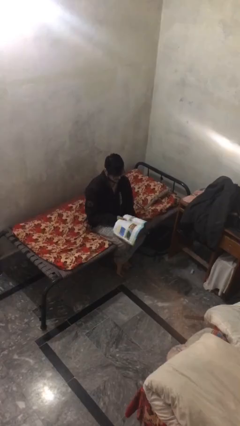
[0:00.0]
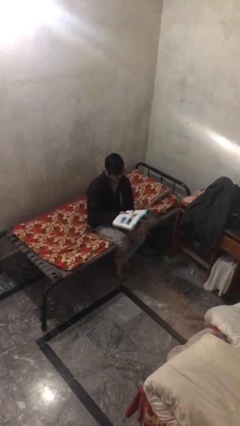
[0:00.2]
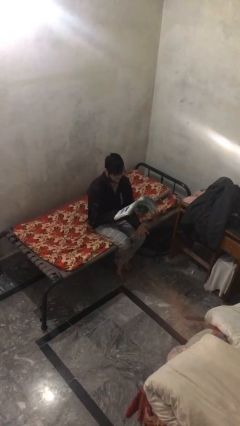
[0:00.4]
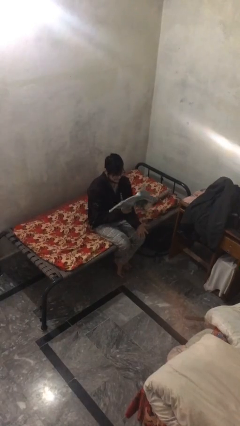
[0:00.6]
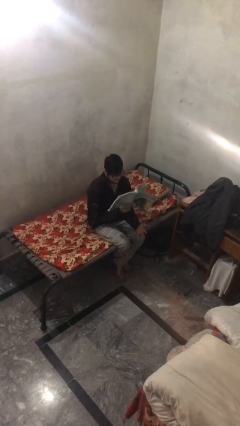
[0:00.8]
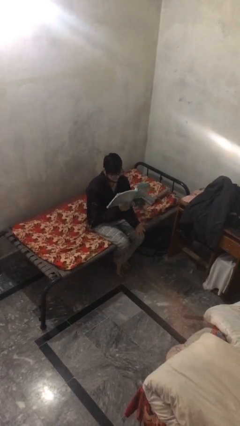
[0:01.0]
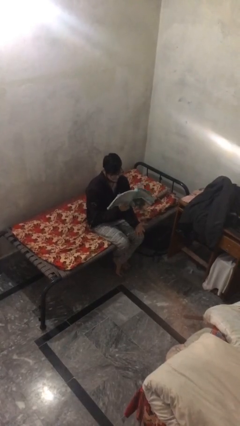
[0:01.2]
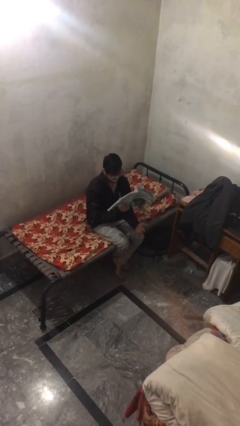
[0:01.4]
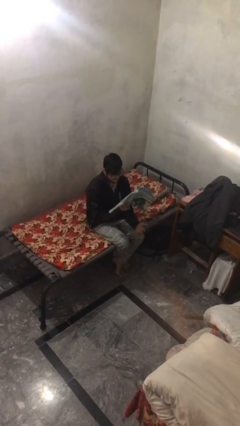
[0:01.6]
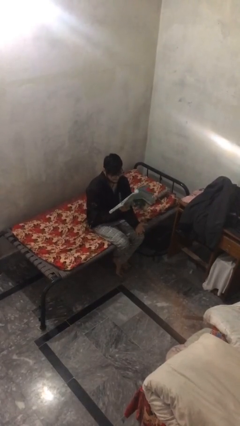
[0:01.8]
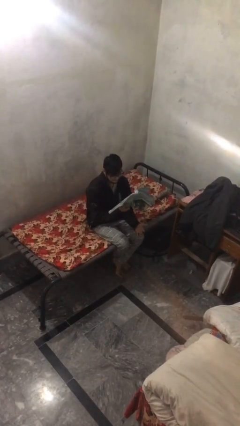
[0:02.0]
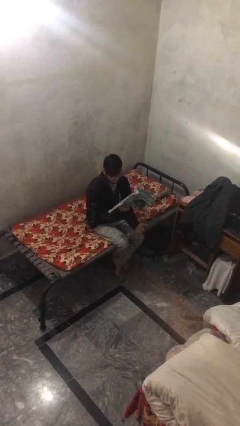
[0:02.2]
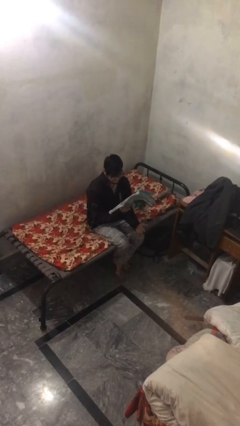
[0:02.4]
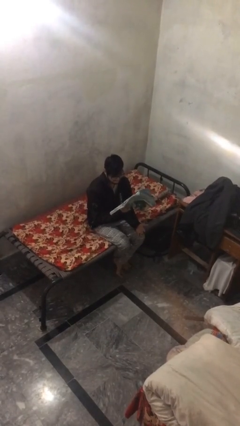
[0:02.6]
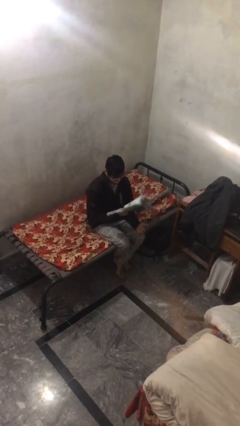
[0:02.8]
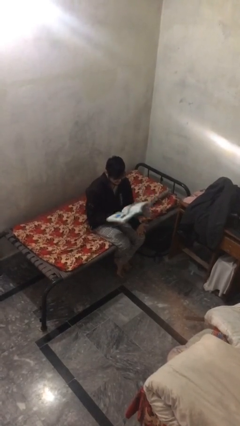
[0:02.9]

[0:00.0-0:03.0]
person reads document

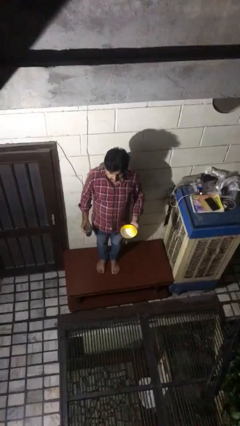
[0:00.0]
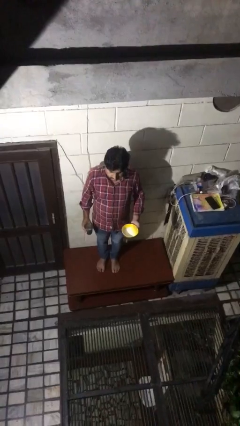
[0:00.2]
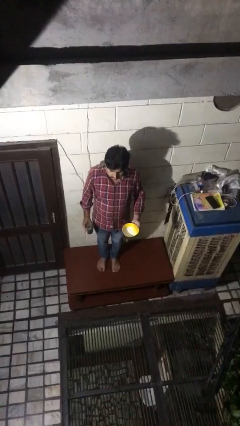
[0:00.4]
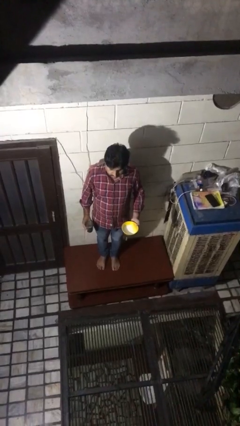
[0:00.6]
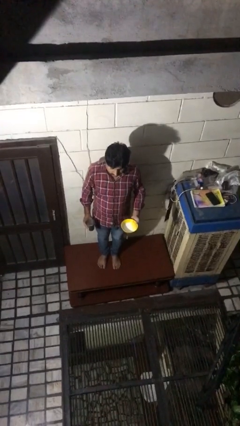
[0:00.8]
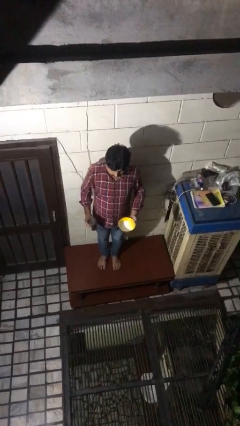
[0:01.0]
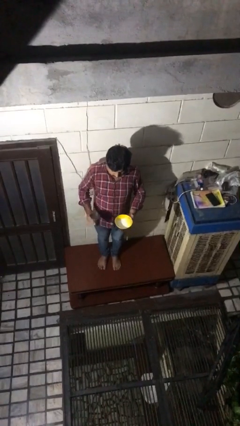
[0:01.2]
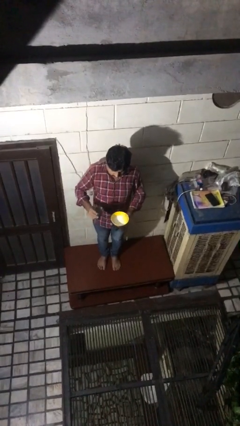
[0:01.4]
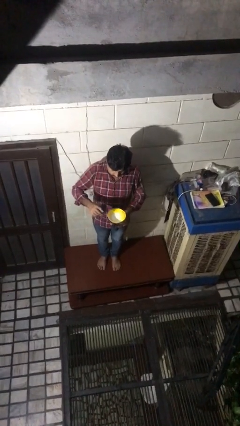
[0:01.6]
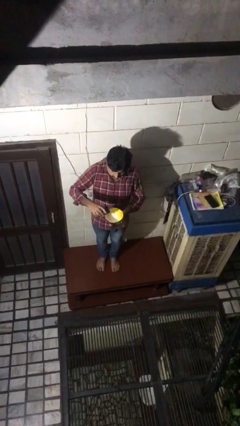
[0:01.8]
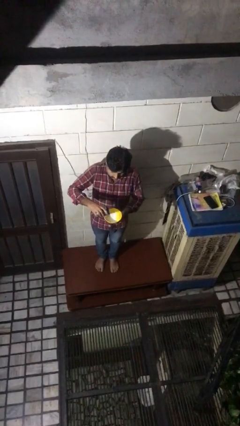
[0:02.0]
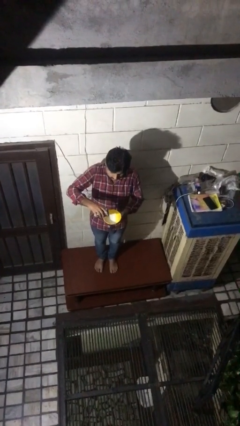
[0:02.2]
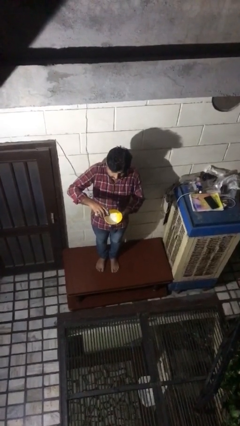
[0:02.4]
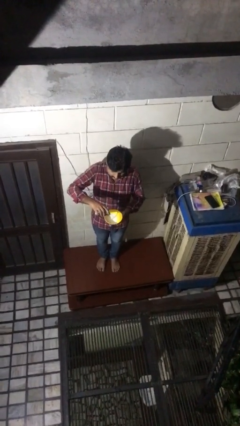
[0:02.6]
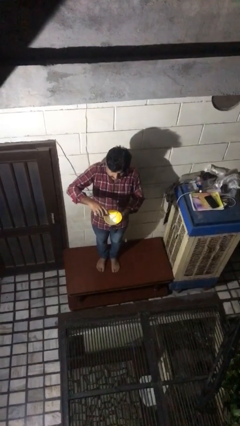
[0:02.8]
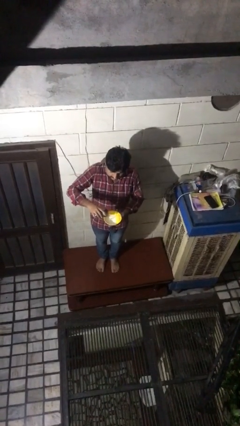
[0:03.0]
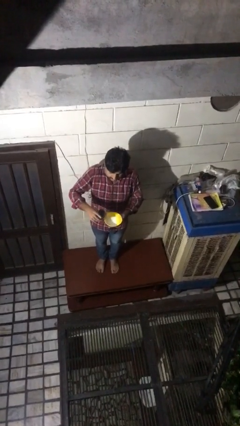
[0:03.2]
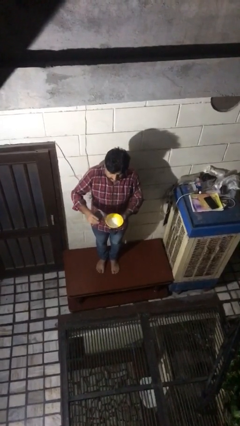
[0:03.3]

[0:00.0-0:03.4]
person pours into bowl

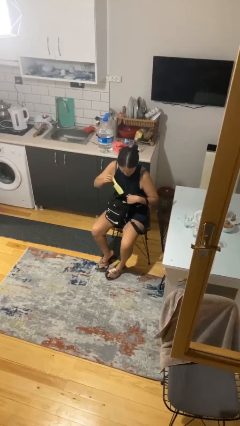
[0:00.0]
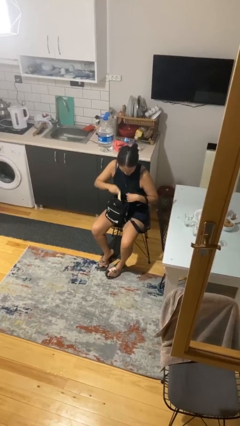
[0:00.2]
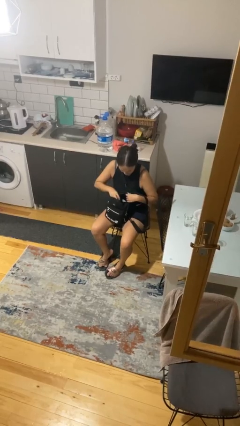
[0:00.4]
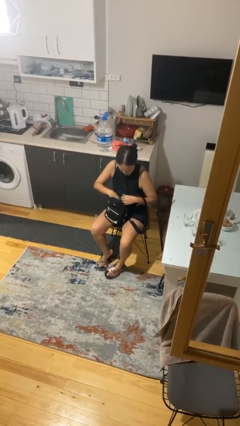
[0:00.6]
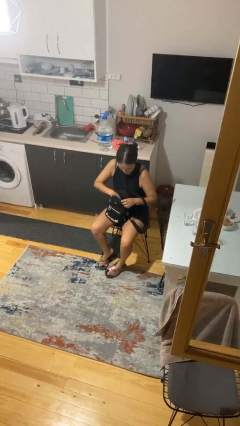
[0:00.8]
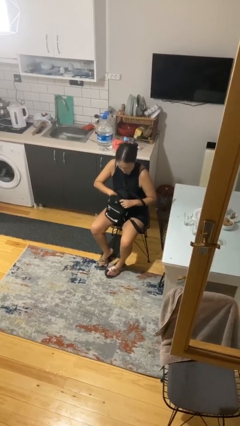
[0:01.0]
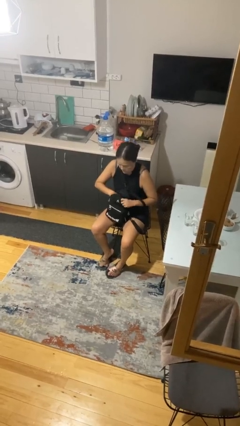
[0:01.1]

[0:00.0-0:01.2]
person puts object into backpack

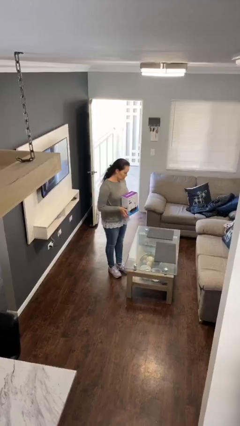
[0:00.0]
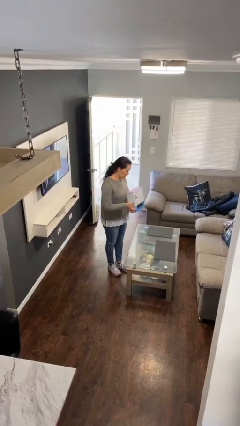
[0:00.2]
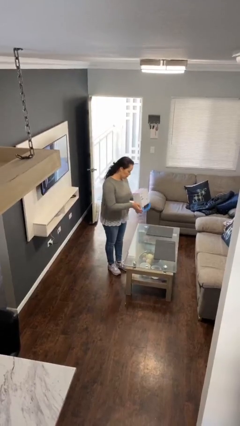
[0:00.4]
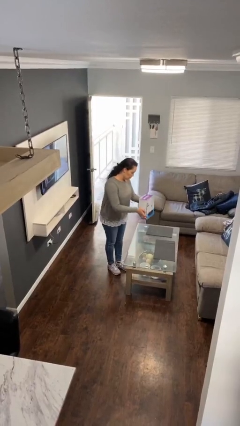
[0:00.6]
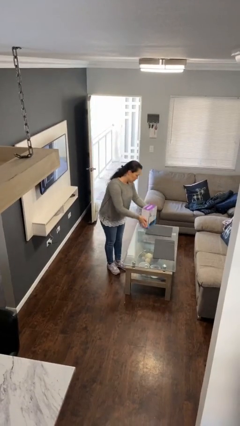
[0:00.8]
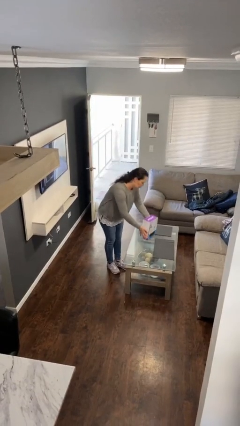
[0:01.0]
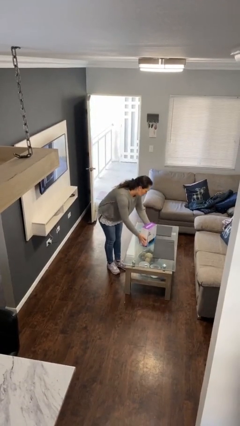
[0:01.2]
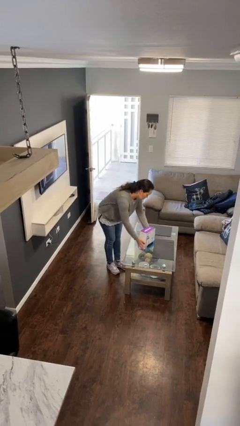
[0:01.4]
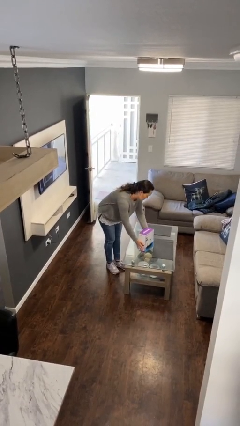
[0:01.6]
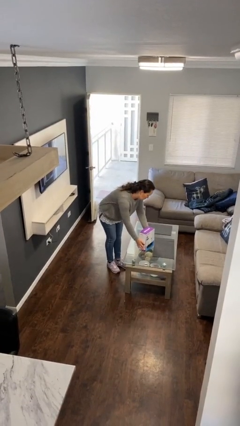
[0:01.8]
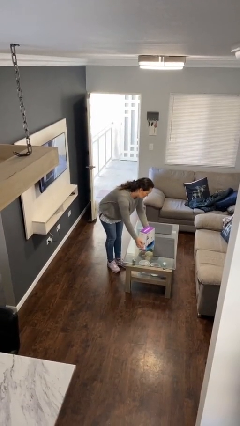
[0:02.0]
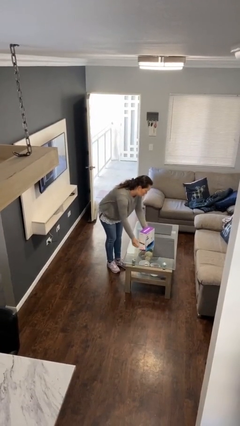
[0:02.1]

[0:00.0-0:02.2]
person puts down object on table

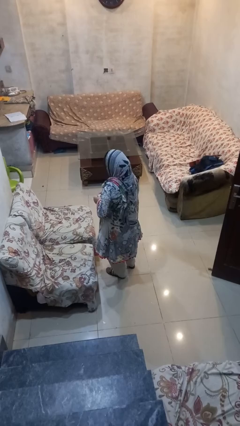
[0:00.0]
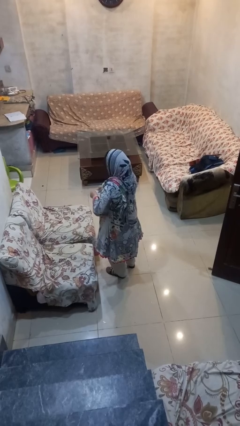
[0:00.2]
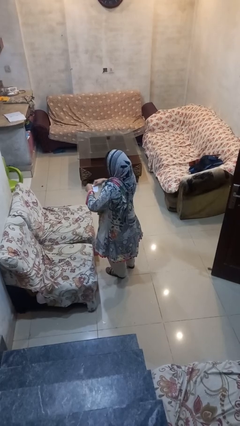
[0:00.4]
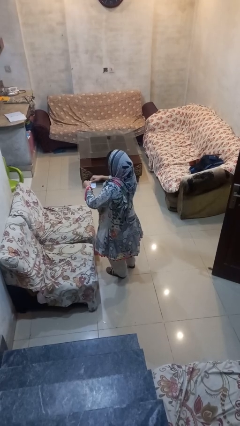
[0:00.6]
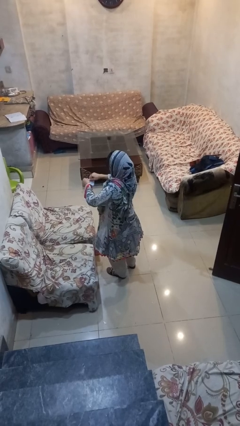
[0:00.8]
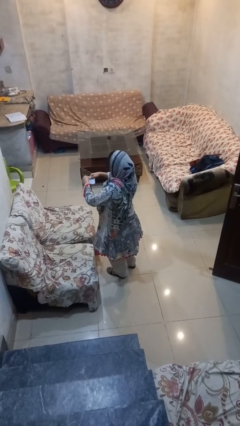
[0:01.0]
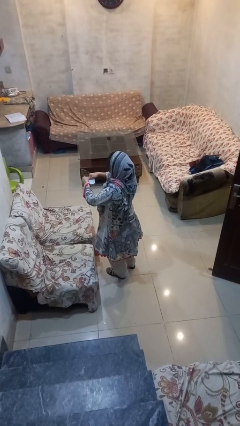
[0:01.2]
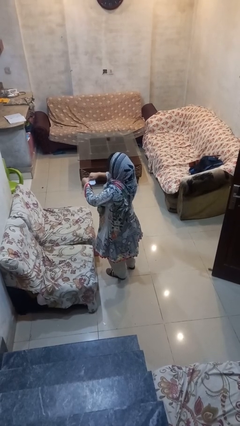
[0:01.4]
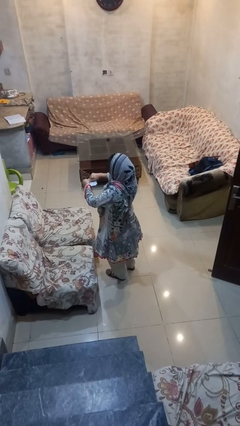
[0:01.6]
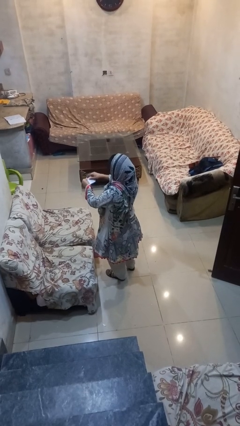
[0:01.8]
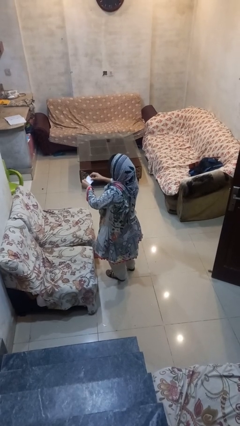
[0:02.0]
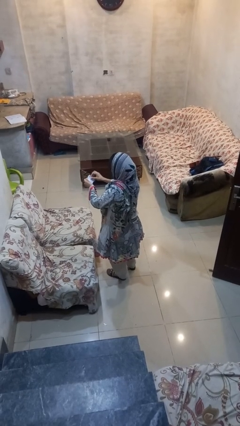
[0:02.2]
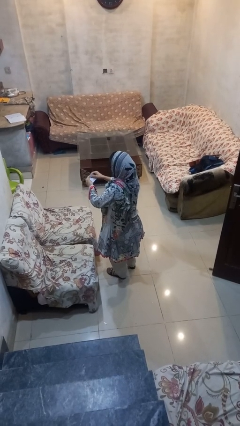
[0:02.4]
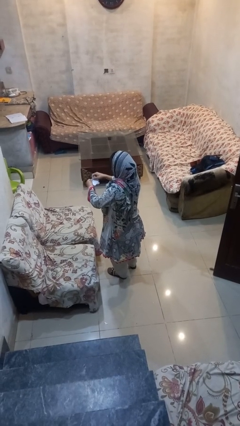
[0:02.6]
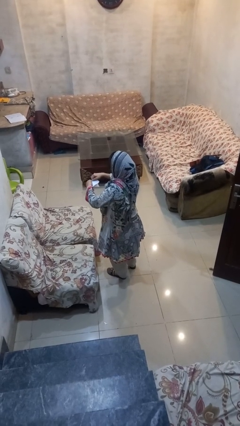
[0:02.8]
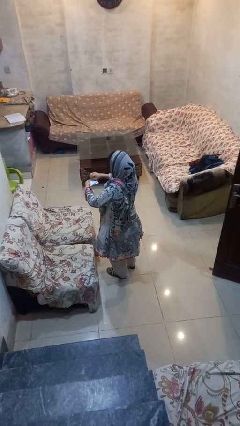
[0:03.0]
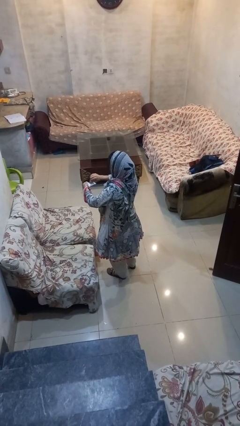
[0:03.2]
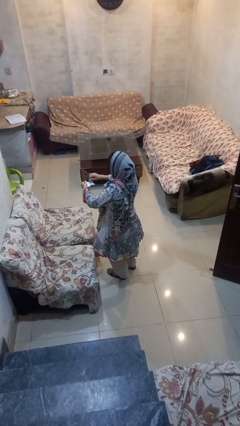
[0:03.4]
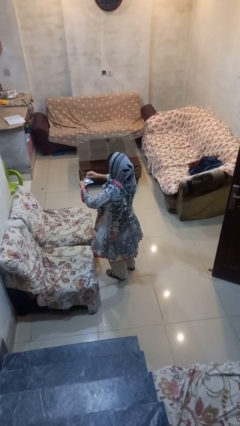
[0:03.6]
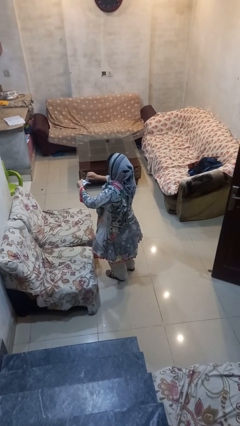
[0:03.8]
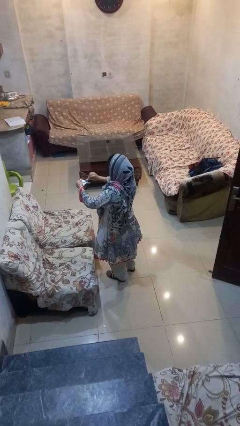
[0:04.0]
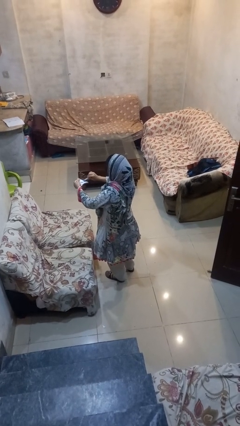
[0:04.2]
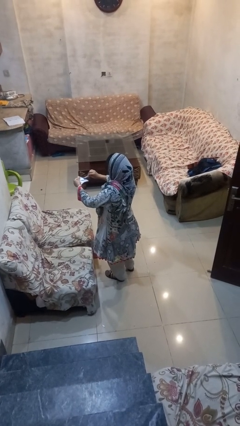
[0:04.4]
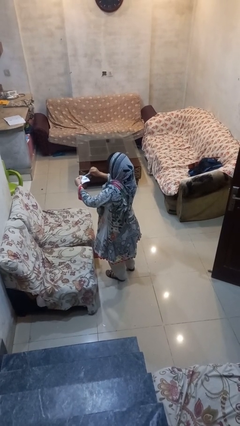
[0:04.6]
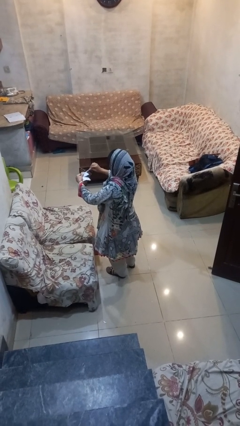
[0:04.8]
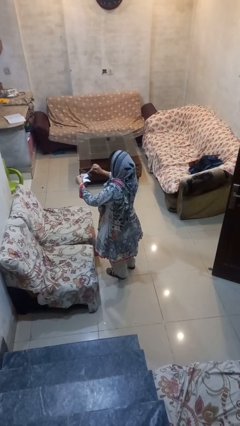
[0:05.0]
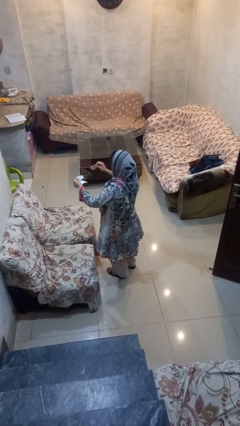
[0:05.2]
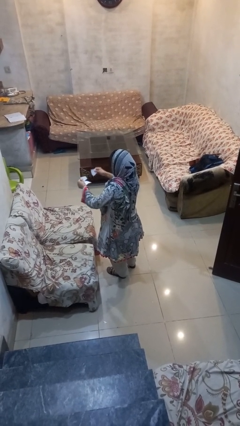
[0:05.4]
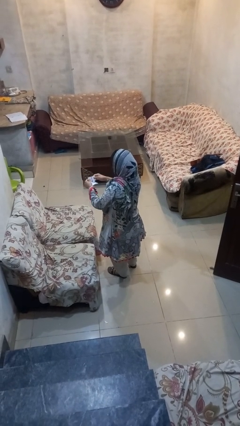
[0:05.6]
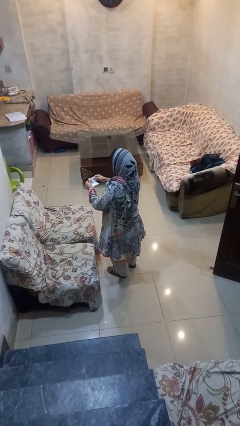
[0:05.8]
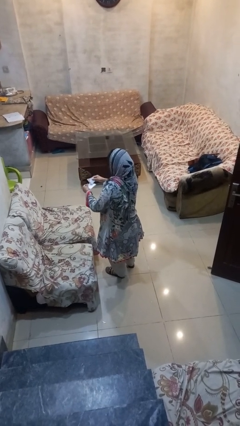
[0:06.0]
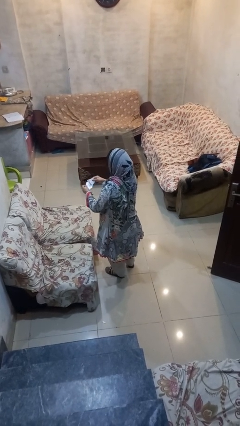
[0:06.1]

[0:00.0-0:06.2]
person tears paper

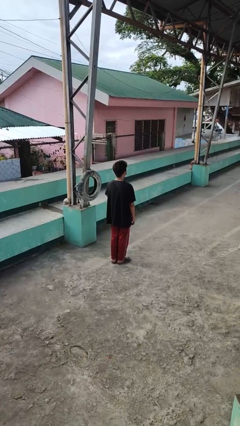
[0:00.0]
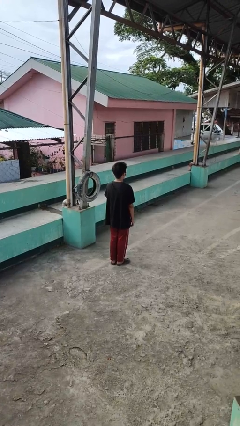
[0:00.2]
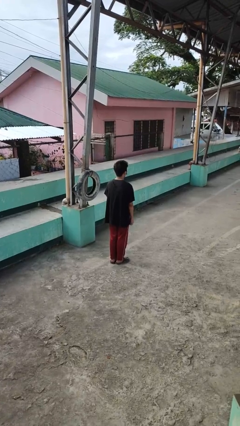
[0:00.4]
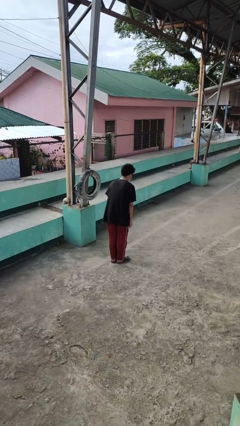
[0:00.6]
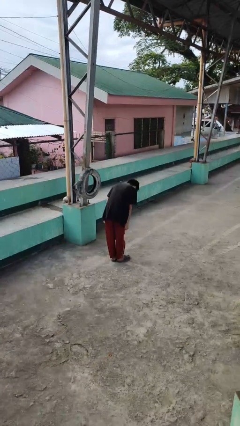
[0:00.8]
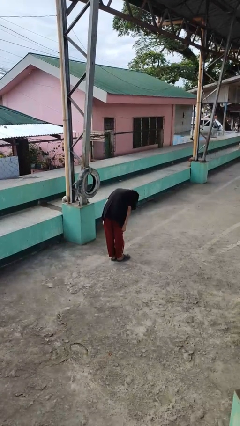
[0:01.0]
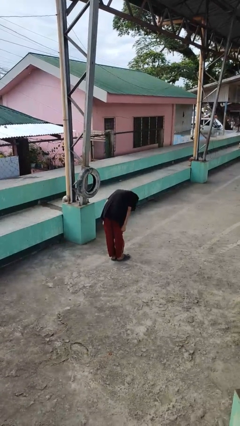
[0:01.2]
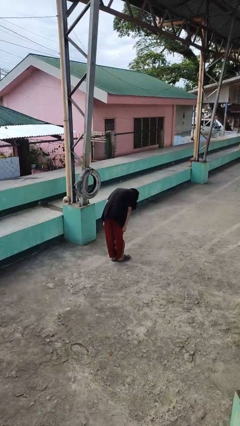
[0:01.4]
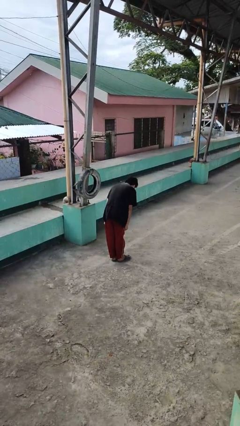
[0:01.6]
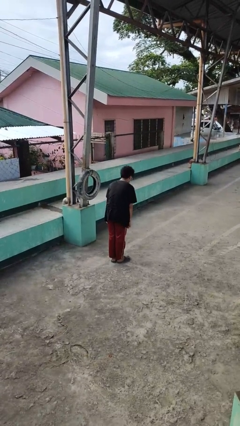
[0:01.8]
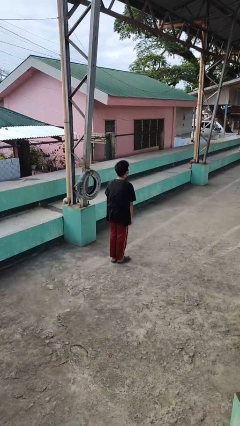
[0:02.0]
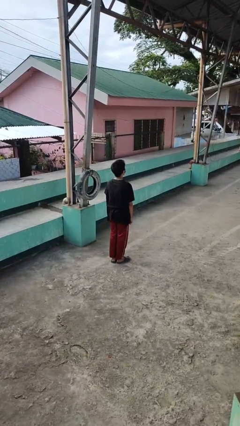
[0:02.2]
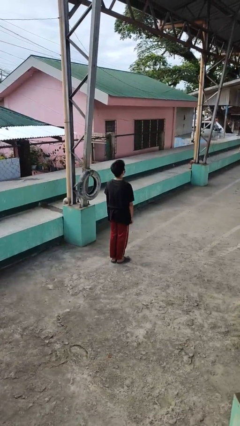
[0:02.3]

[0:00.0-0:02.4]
person bows
